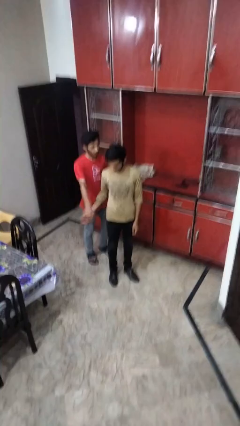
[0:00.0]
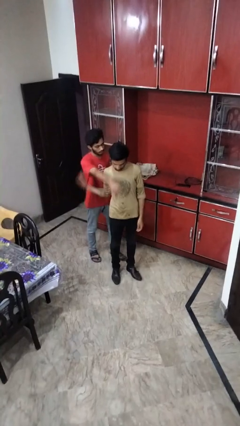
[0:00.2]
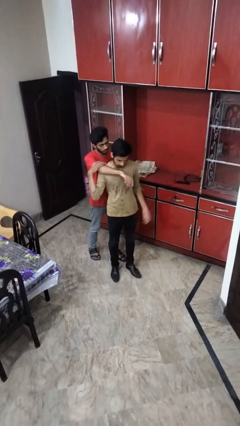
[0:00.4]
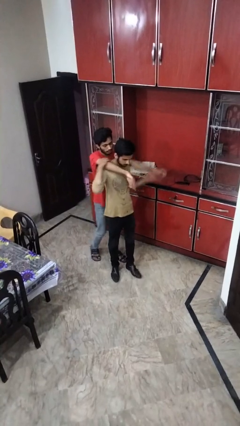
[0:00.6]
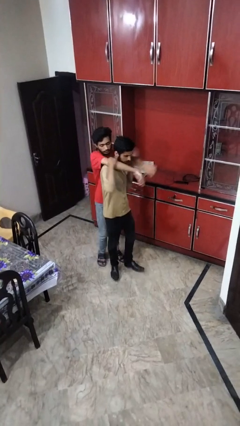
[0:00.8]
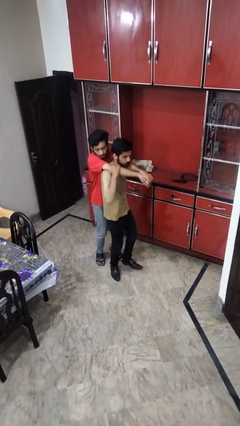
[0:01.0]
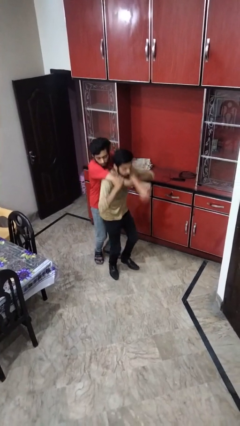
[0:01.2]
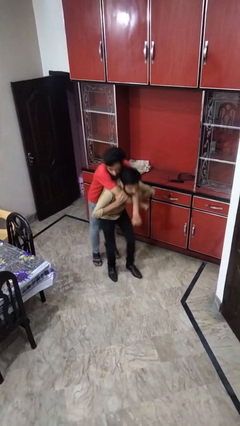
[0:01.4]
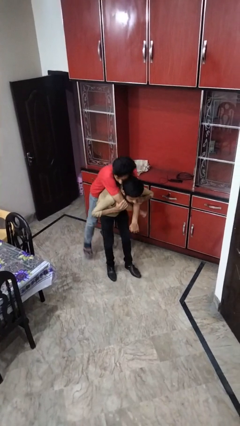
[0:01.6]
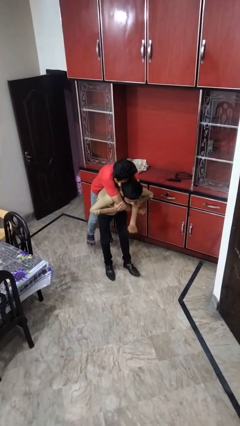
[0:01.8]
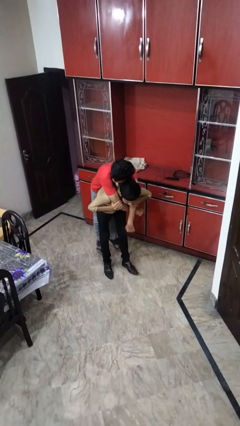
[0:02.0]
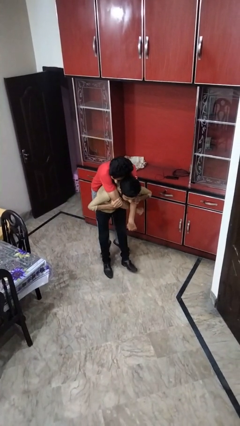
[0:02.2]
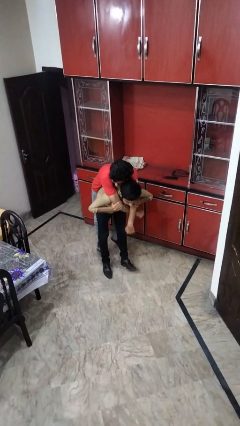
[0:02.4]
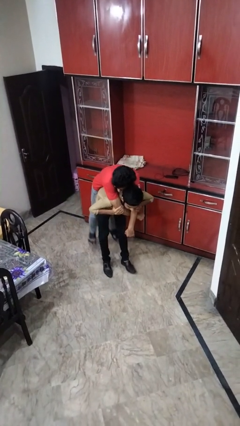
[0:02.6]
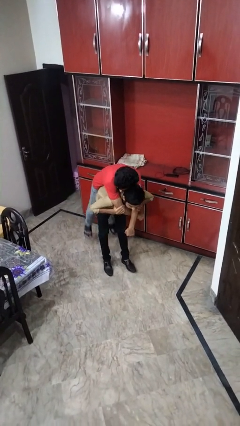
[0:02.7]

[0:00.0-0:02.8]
person carries person over shoulder

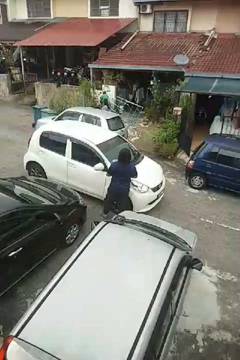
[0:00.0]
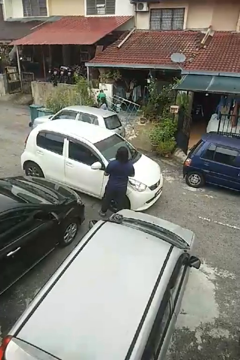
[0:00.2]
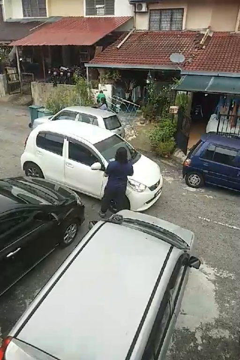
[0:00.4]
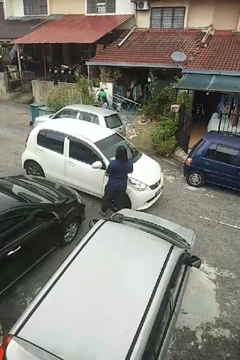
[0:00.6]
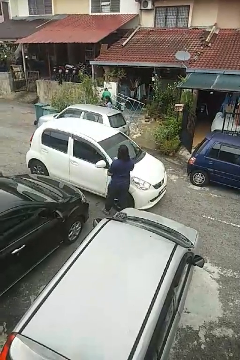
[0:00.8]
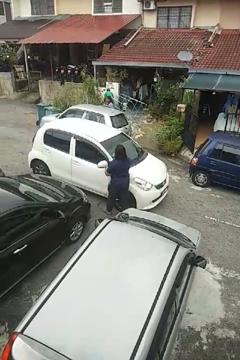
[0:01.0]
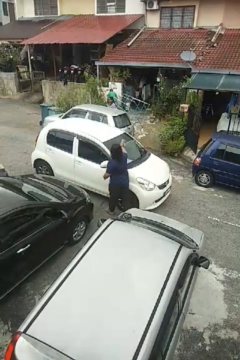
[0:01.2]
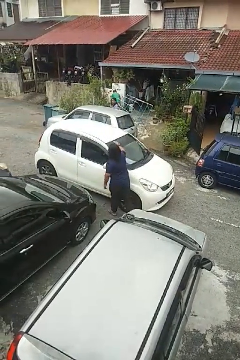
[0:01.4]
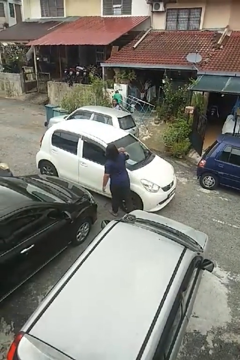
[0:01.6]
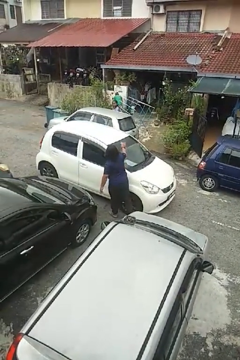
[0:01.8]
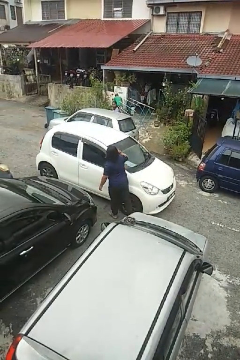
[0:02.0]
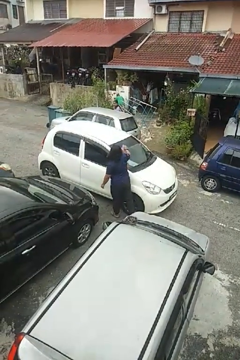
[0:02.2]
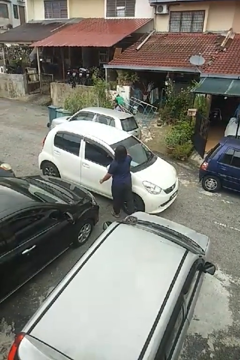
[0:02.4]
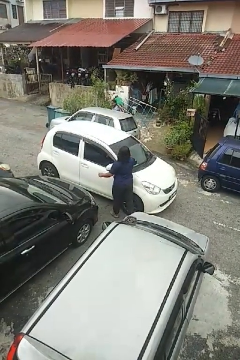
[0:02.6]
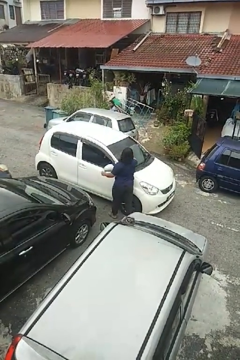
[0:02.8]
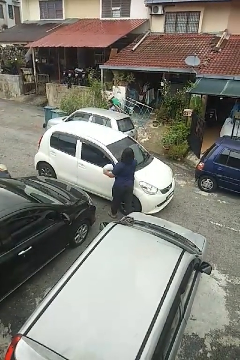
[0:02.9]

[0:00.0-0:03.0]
person polishes car with rag

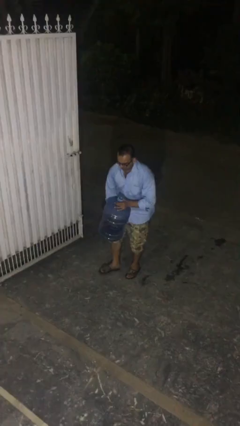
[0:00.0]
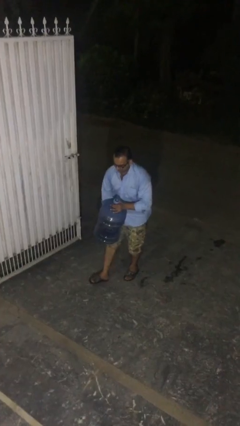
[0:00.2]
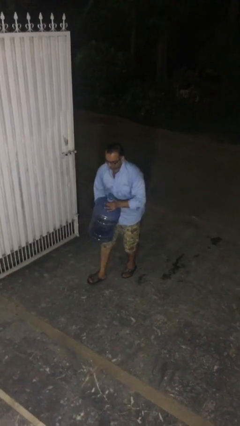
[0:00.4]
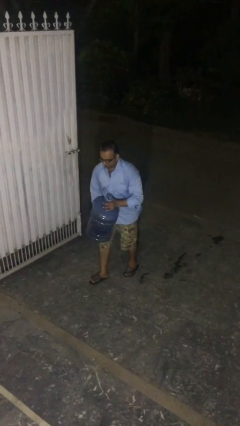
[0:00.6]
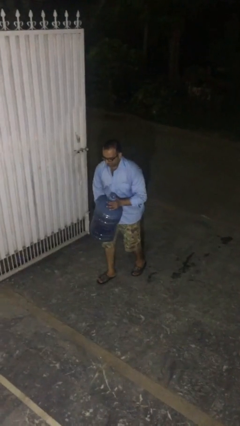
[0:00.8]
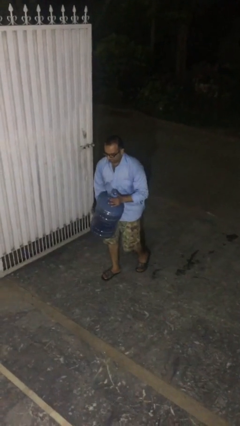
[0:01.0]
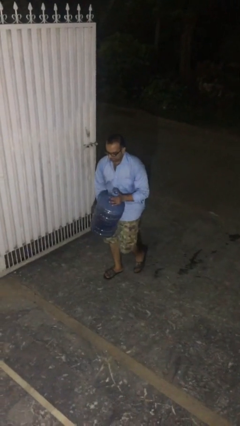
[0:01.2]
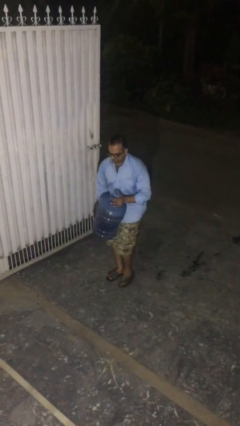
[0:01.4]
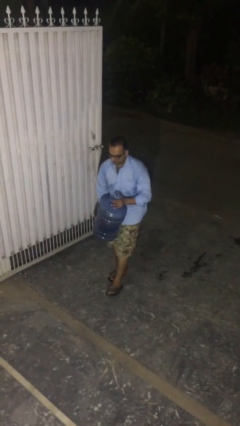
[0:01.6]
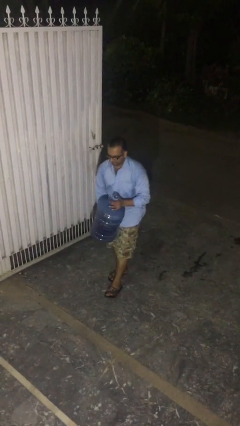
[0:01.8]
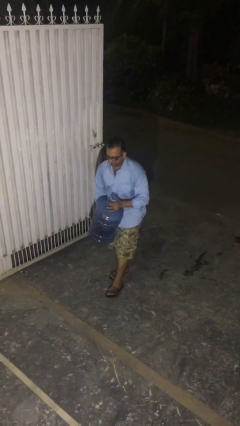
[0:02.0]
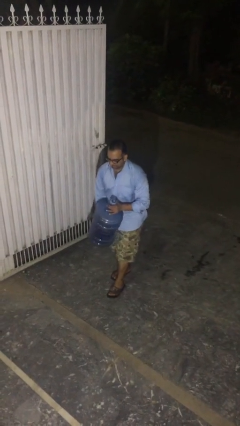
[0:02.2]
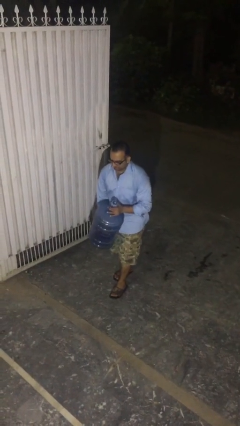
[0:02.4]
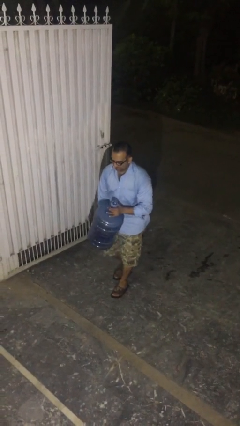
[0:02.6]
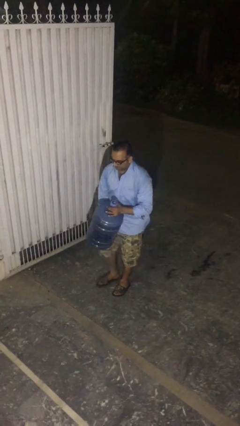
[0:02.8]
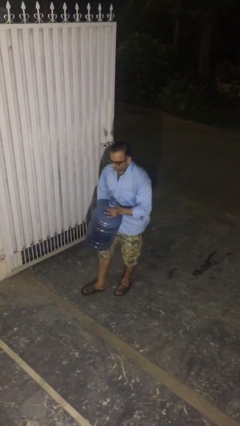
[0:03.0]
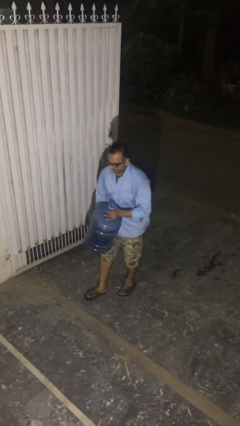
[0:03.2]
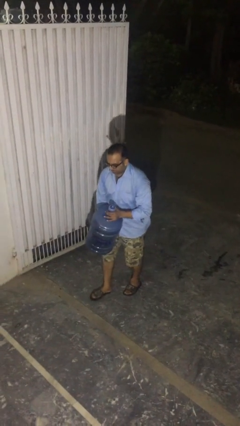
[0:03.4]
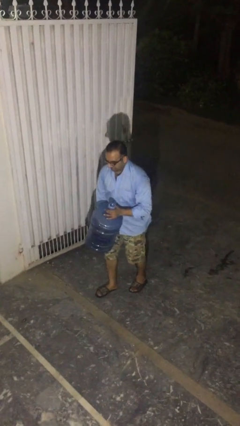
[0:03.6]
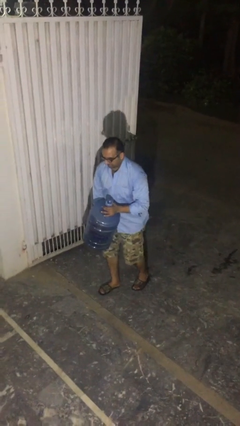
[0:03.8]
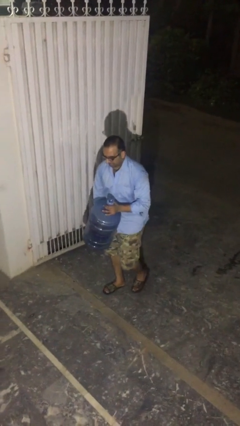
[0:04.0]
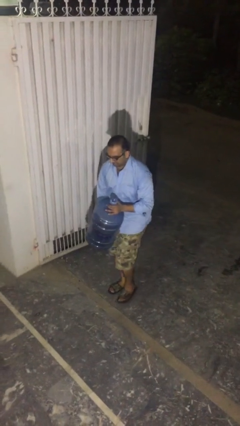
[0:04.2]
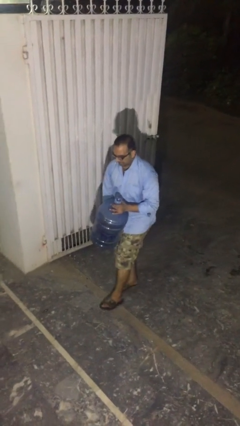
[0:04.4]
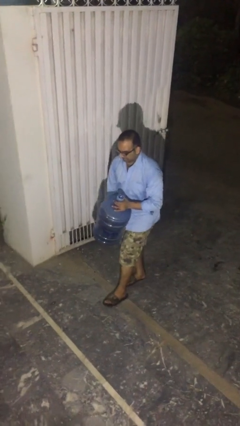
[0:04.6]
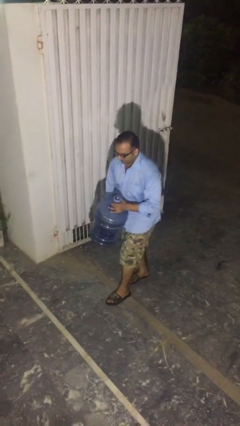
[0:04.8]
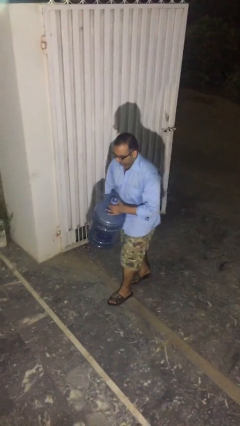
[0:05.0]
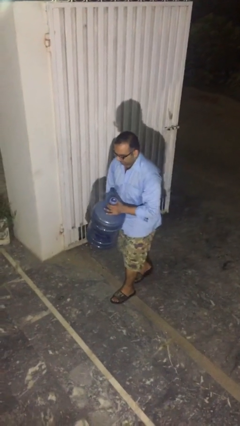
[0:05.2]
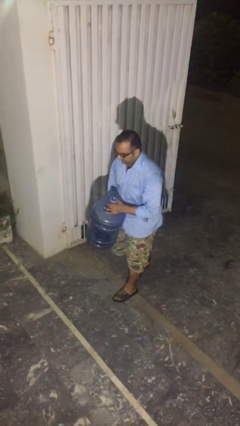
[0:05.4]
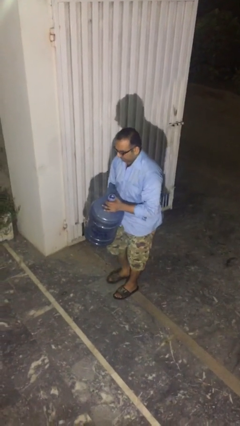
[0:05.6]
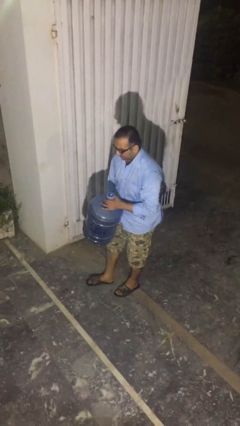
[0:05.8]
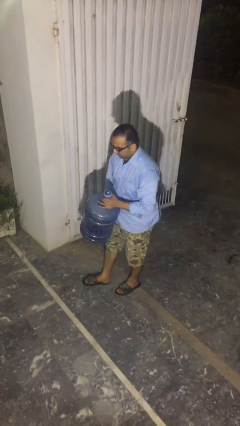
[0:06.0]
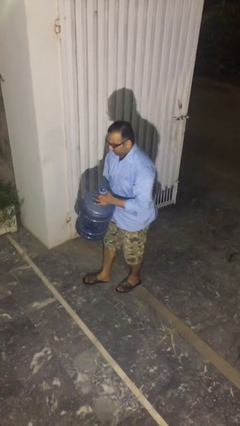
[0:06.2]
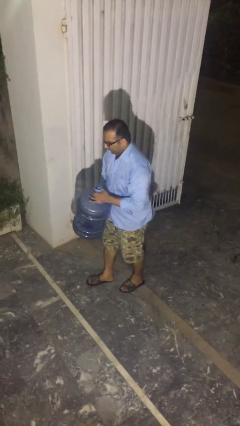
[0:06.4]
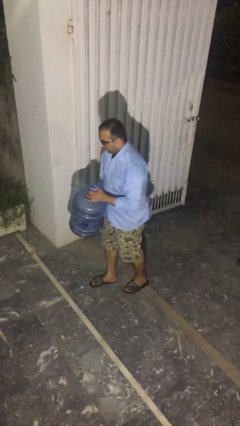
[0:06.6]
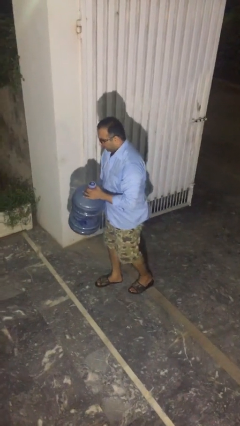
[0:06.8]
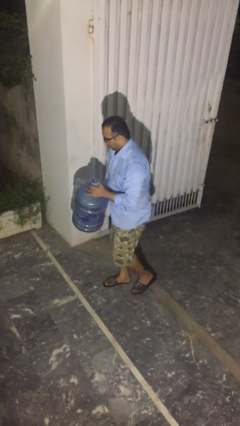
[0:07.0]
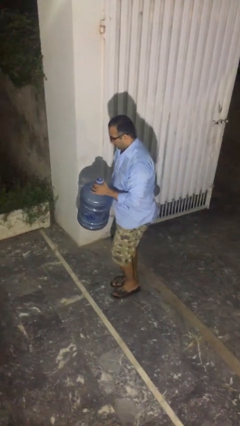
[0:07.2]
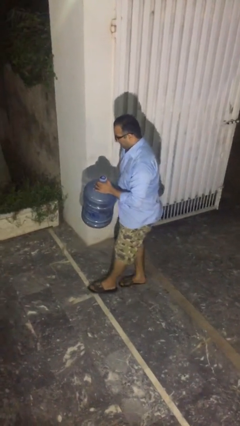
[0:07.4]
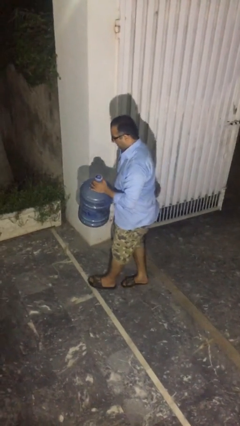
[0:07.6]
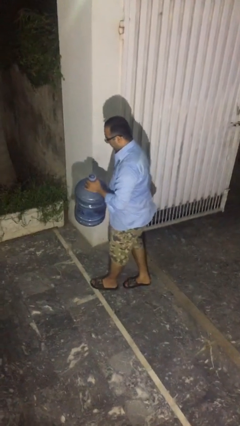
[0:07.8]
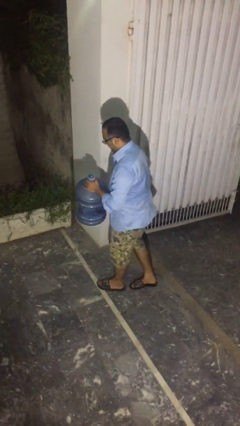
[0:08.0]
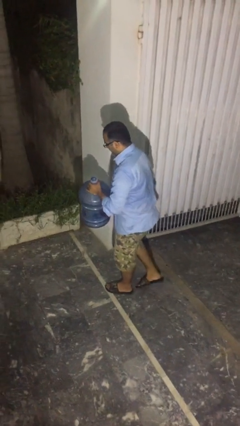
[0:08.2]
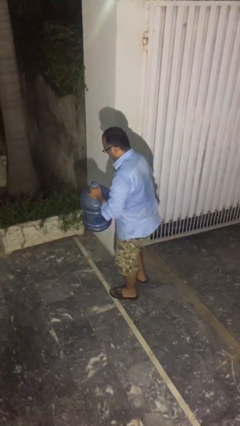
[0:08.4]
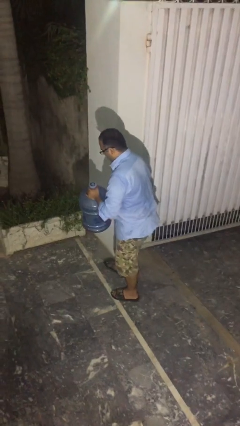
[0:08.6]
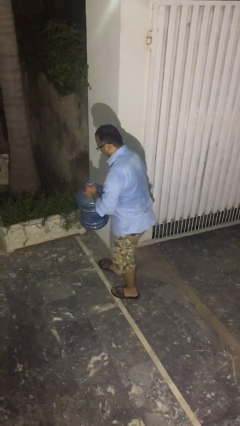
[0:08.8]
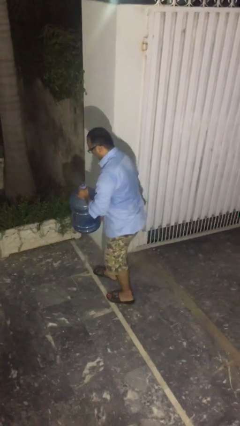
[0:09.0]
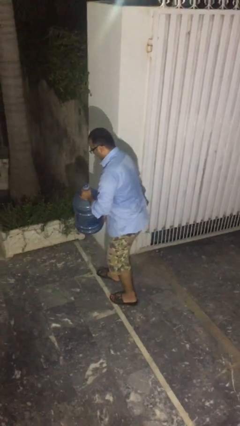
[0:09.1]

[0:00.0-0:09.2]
person carries heavy object

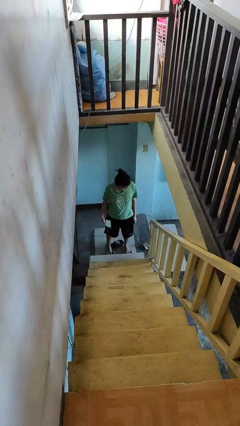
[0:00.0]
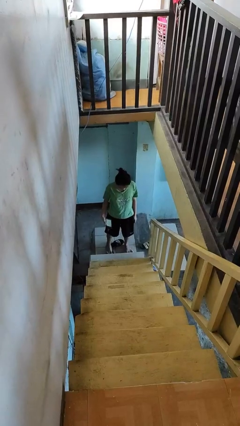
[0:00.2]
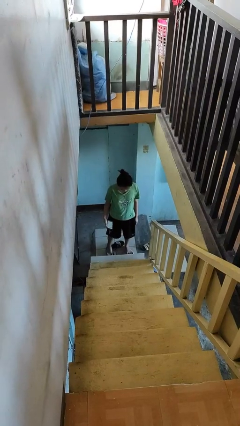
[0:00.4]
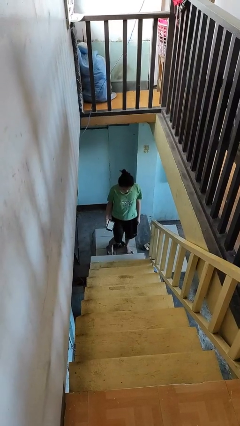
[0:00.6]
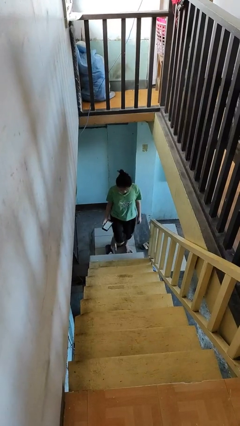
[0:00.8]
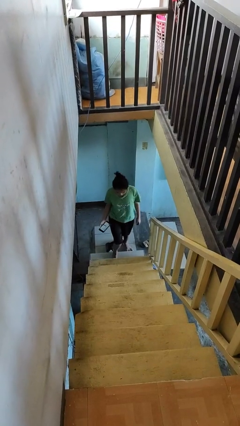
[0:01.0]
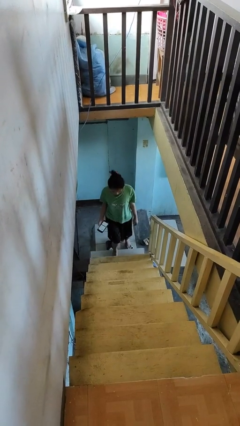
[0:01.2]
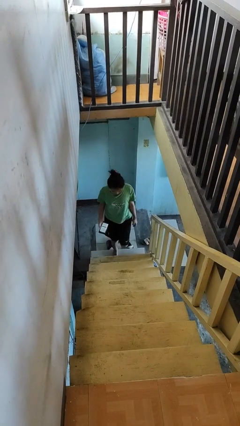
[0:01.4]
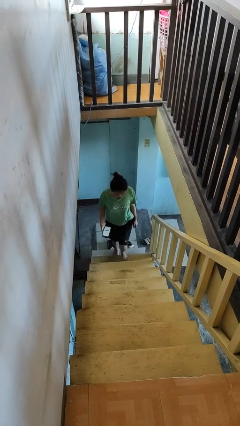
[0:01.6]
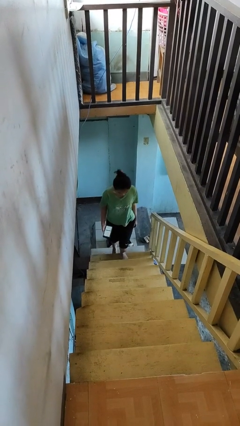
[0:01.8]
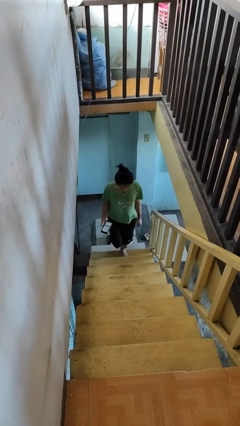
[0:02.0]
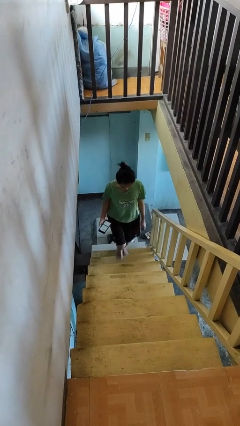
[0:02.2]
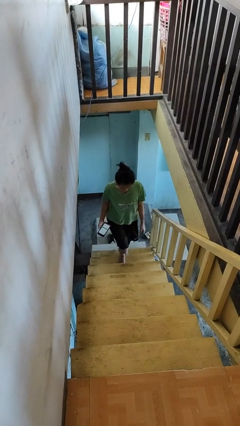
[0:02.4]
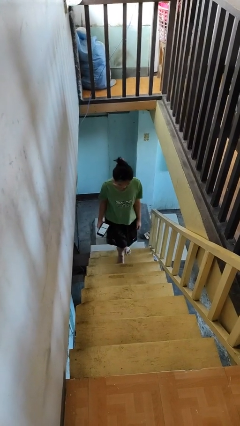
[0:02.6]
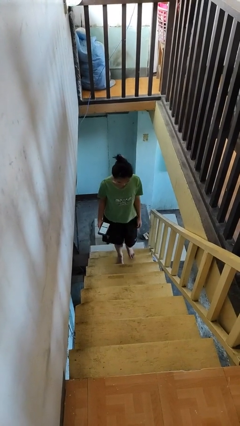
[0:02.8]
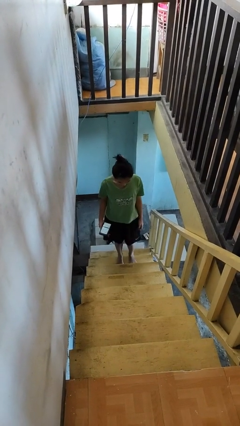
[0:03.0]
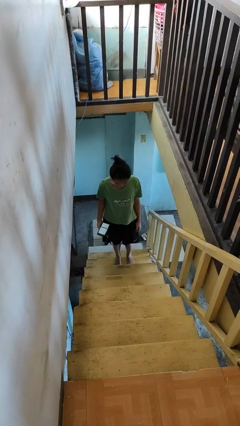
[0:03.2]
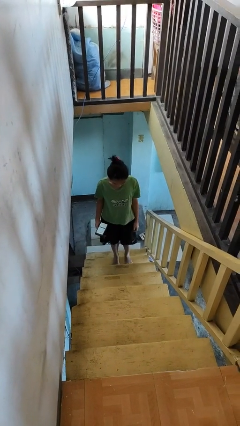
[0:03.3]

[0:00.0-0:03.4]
person climbs up stairs
